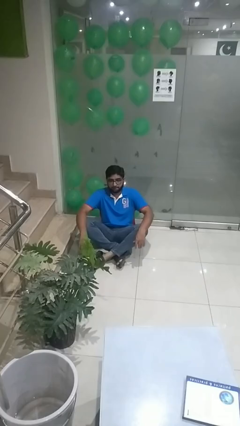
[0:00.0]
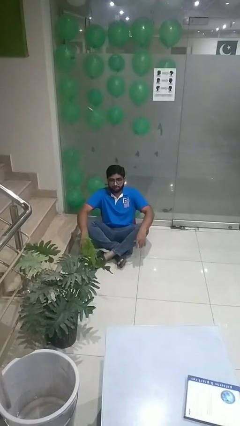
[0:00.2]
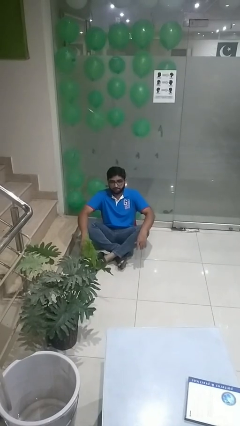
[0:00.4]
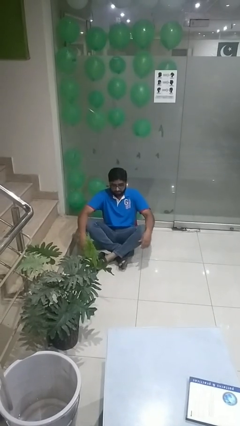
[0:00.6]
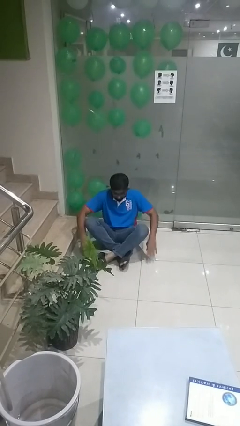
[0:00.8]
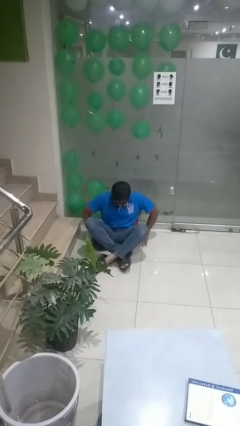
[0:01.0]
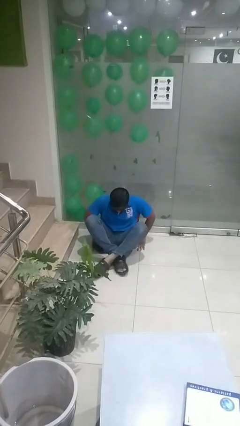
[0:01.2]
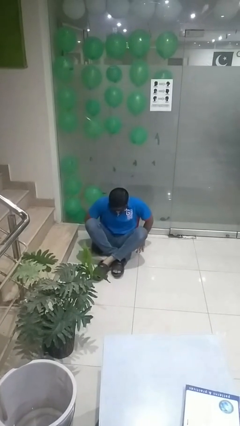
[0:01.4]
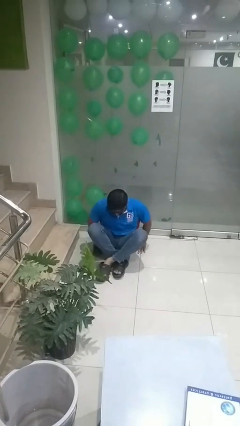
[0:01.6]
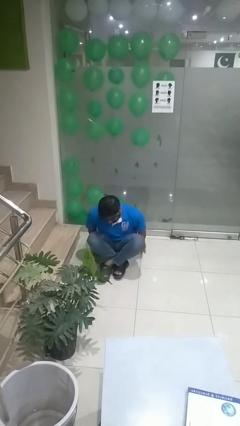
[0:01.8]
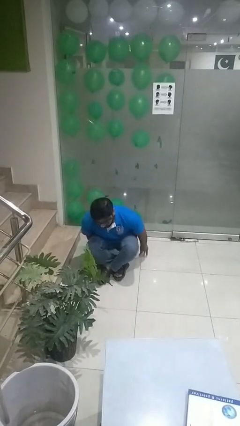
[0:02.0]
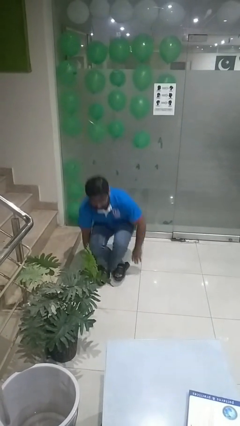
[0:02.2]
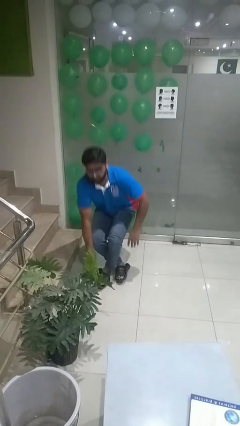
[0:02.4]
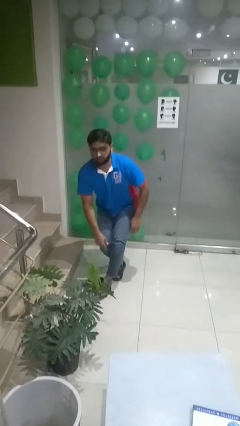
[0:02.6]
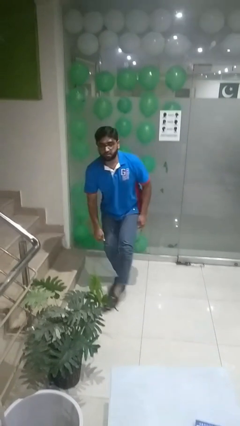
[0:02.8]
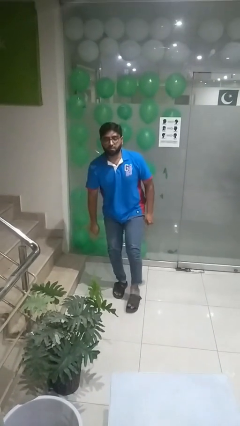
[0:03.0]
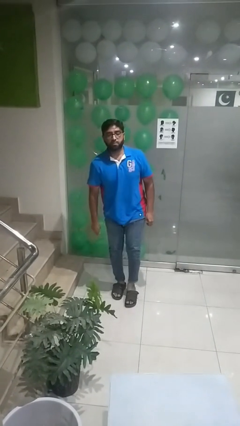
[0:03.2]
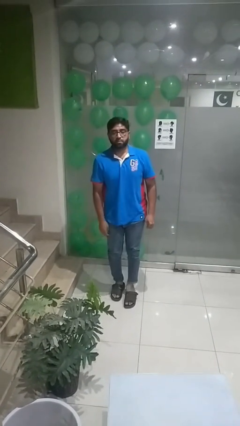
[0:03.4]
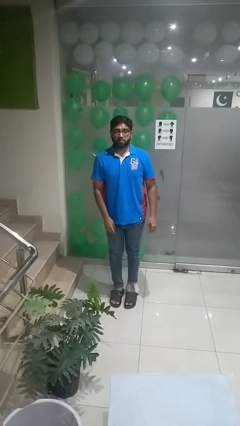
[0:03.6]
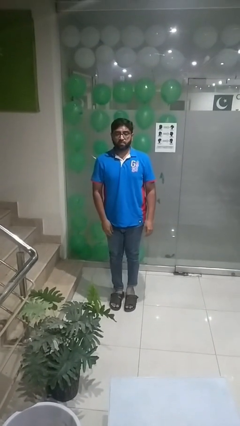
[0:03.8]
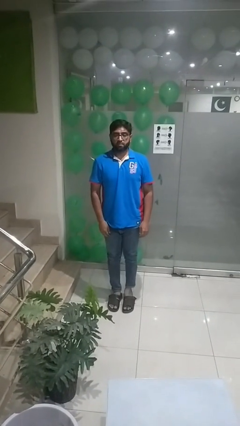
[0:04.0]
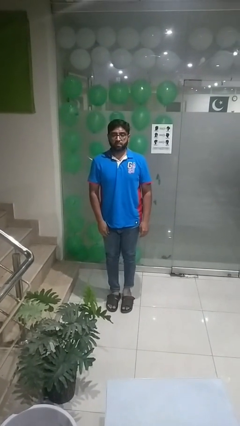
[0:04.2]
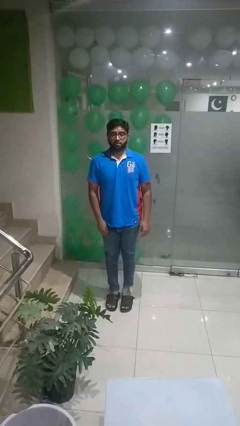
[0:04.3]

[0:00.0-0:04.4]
person stands up from floor

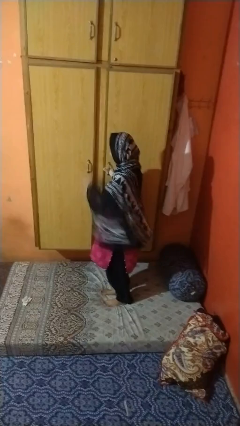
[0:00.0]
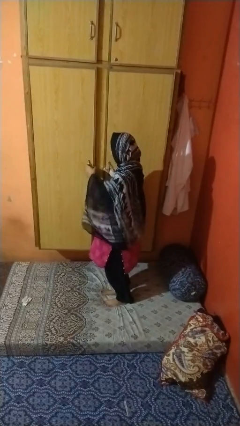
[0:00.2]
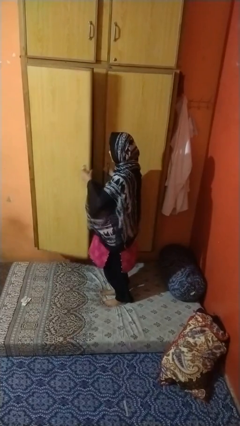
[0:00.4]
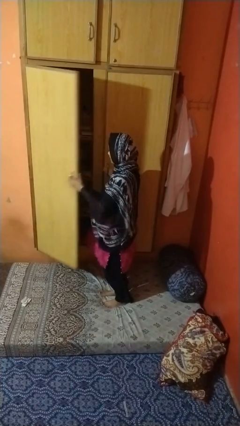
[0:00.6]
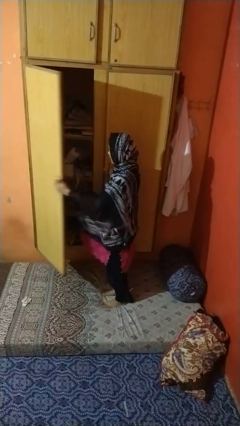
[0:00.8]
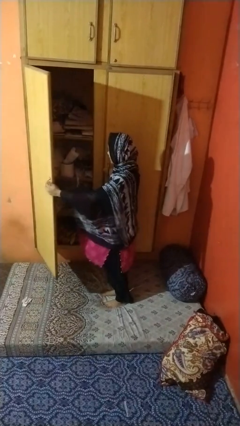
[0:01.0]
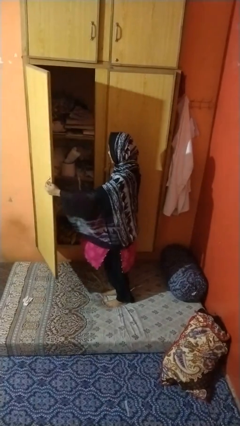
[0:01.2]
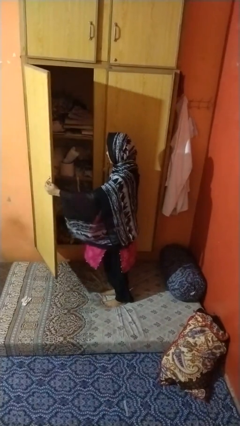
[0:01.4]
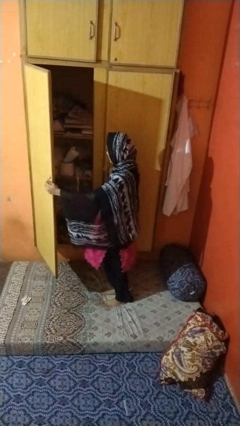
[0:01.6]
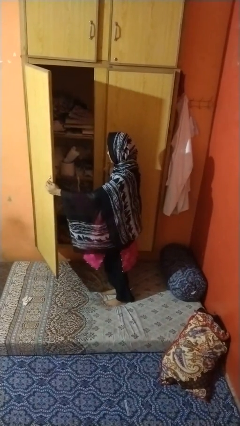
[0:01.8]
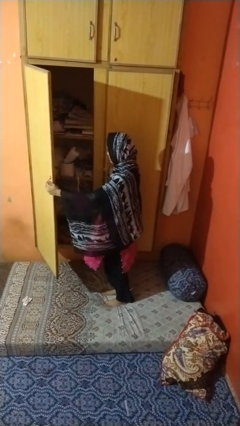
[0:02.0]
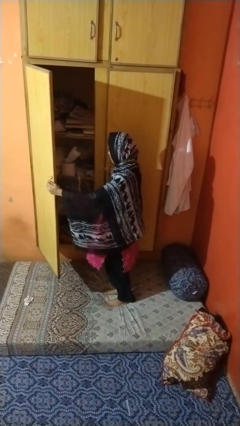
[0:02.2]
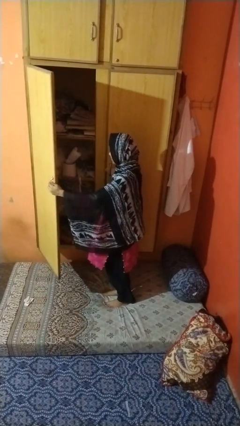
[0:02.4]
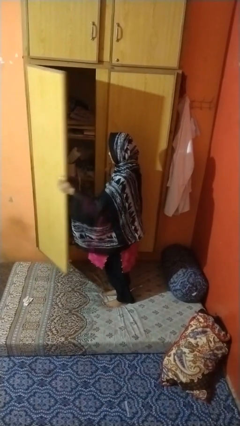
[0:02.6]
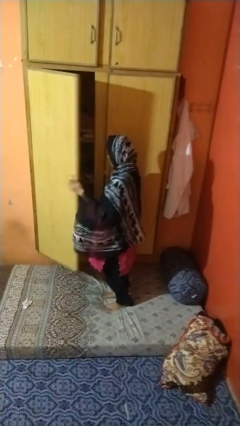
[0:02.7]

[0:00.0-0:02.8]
person opens closet door

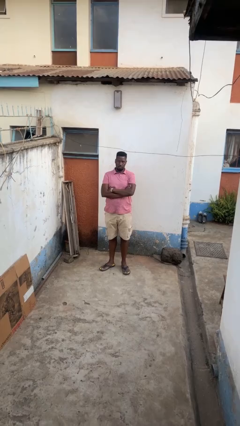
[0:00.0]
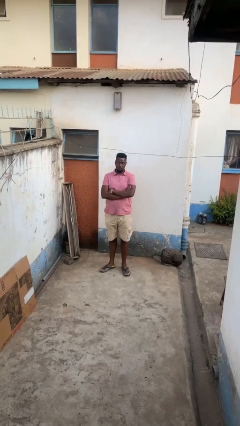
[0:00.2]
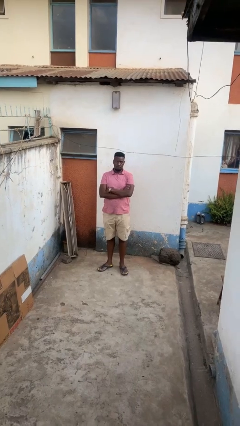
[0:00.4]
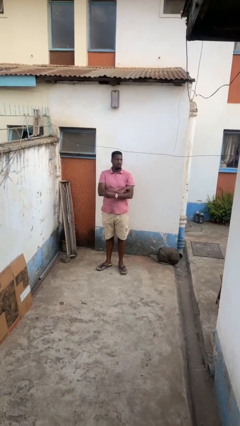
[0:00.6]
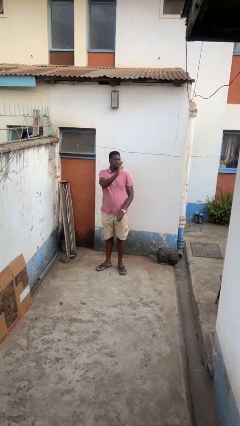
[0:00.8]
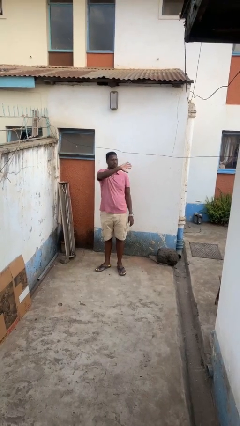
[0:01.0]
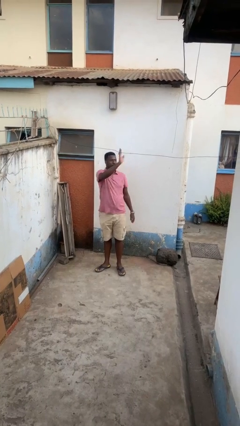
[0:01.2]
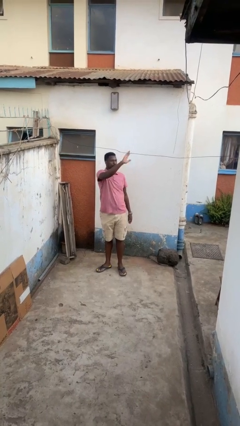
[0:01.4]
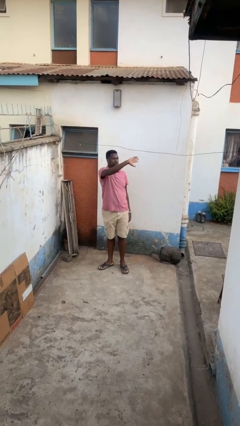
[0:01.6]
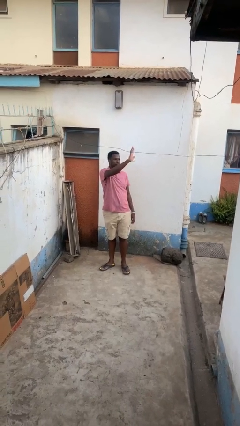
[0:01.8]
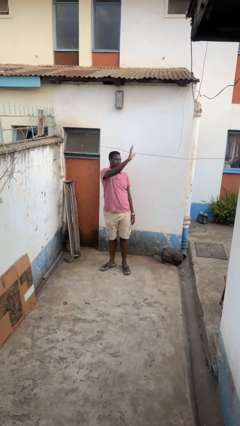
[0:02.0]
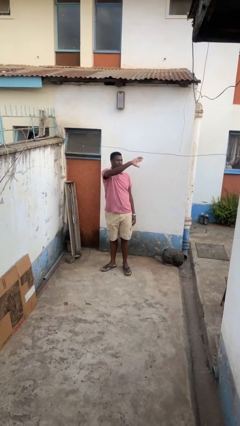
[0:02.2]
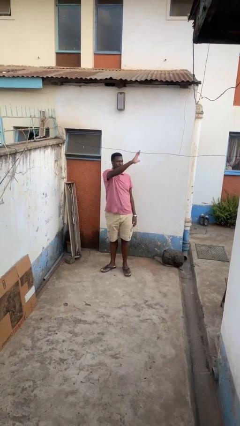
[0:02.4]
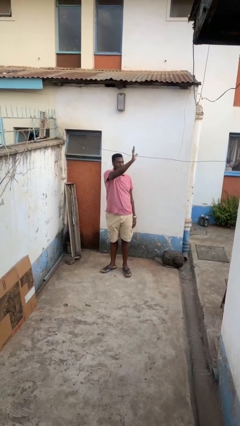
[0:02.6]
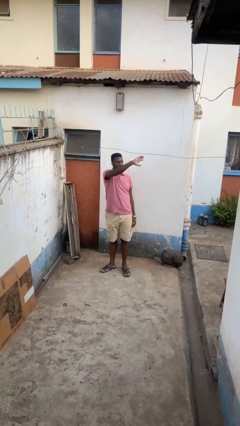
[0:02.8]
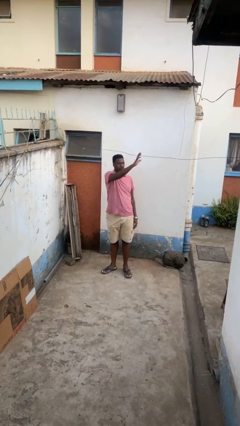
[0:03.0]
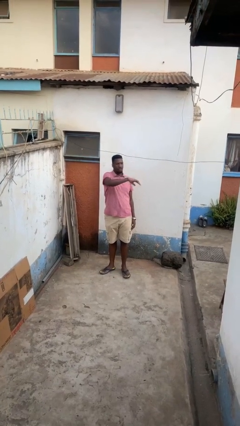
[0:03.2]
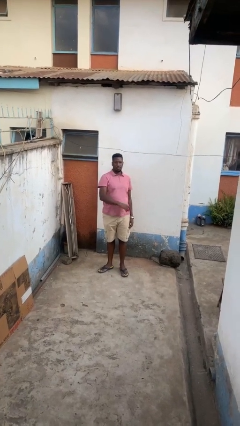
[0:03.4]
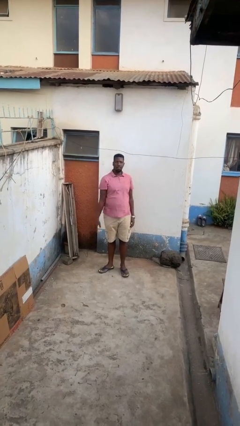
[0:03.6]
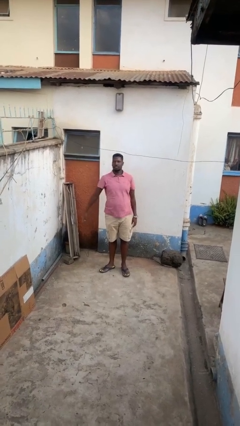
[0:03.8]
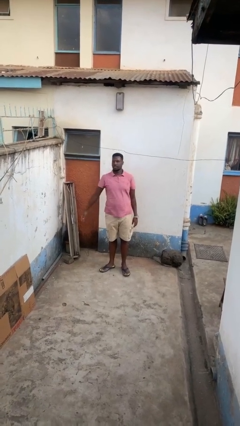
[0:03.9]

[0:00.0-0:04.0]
person waves at person

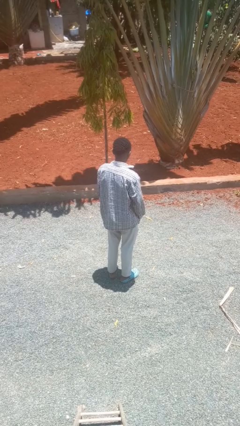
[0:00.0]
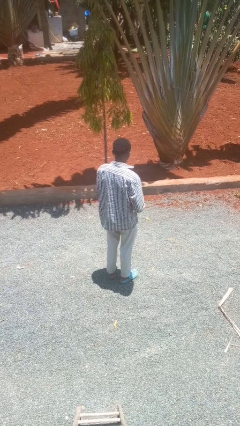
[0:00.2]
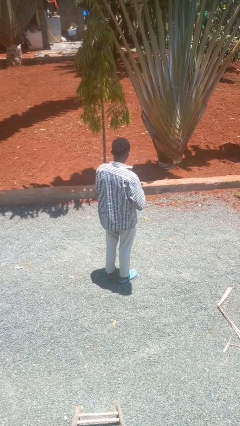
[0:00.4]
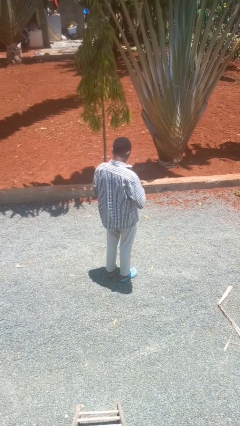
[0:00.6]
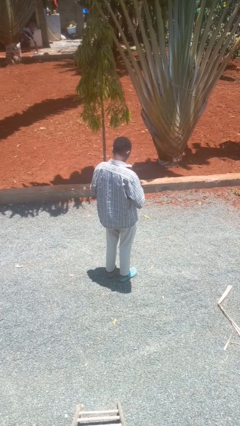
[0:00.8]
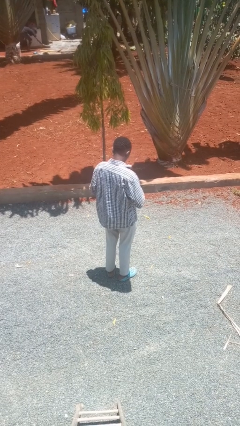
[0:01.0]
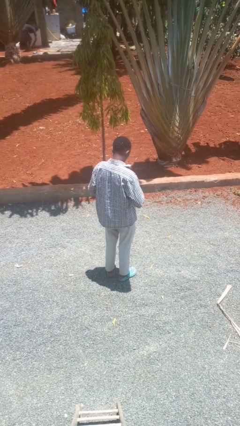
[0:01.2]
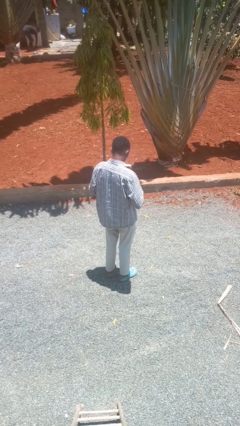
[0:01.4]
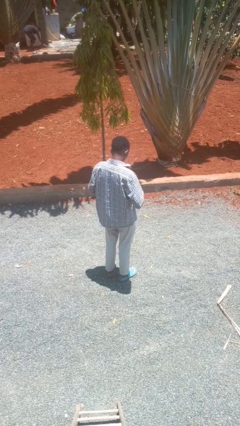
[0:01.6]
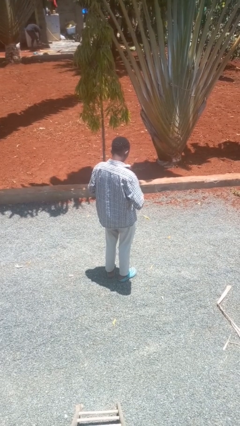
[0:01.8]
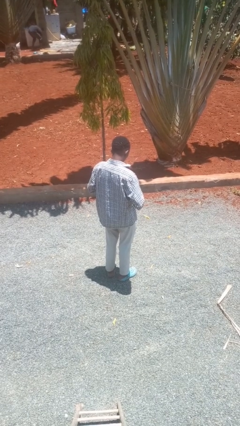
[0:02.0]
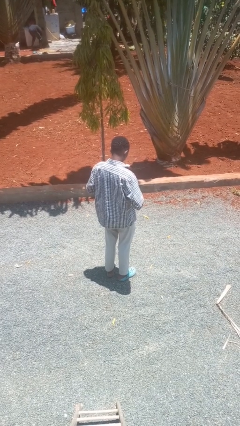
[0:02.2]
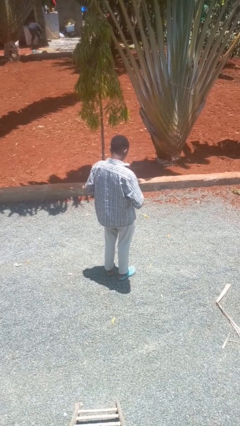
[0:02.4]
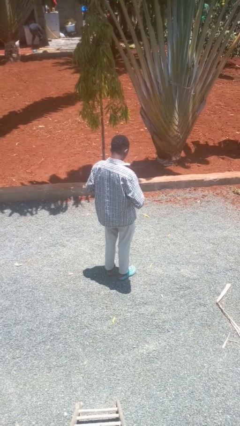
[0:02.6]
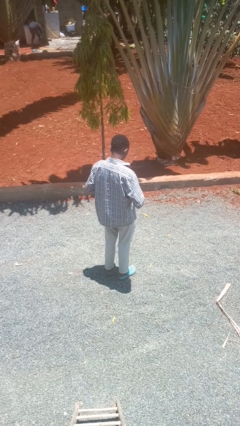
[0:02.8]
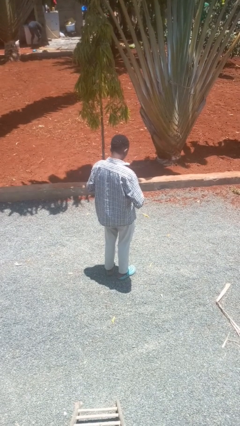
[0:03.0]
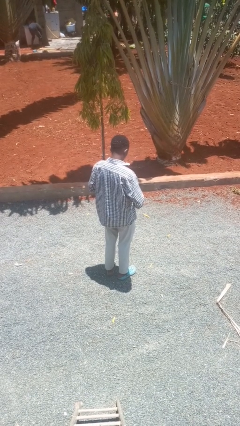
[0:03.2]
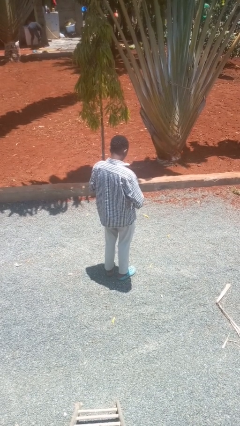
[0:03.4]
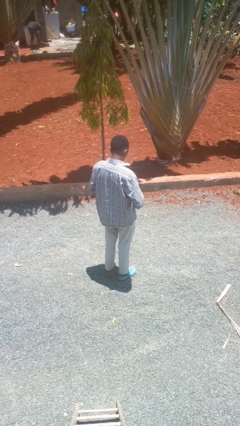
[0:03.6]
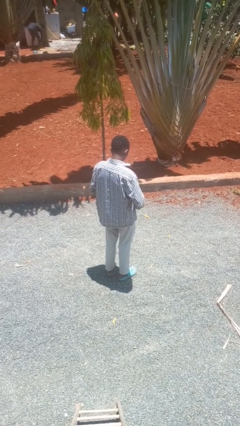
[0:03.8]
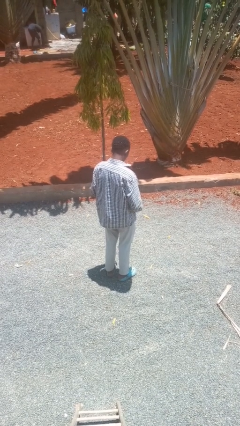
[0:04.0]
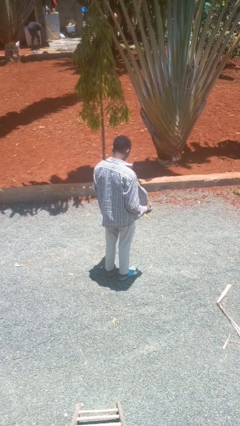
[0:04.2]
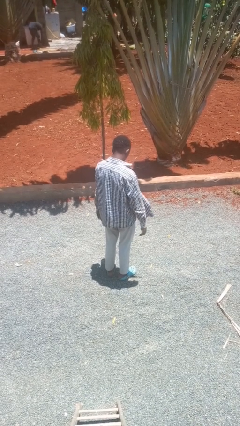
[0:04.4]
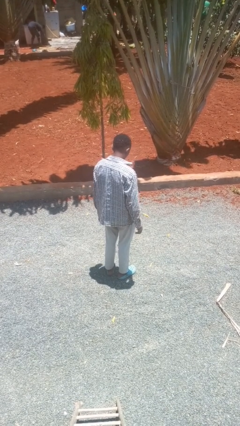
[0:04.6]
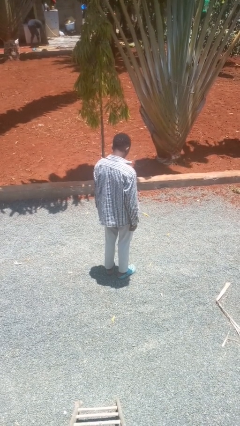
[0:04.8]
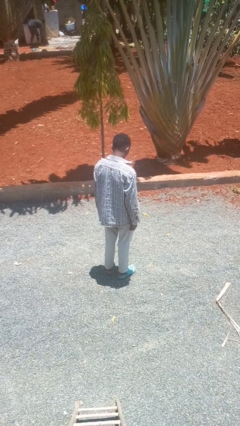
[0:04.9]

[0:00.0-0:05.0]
person unbuttons shirt

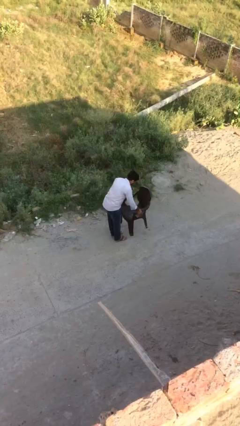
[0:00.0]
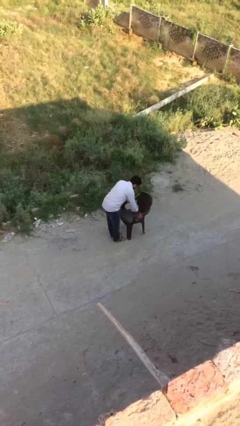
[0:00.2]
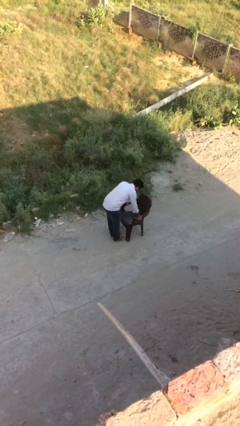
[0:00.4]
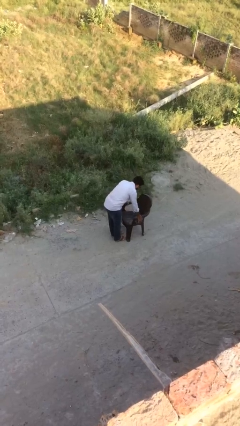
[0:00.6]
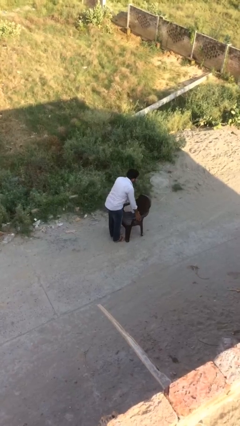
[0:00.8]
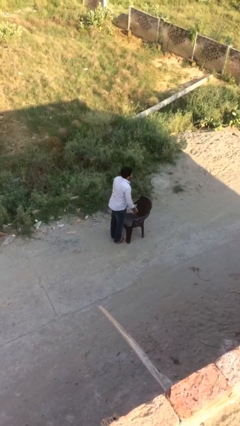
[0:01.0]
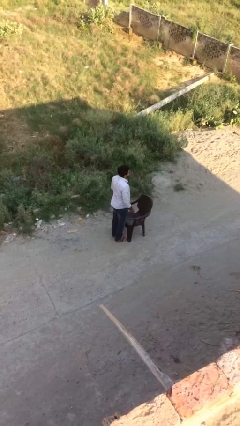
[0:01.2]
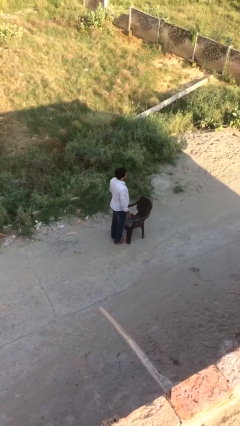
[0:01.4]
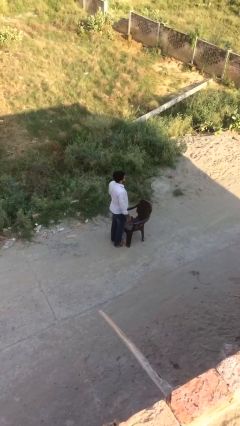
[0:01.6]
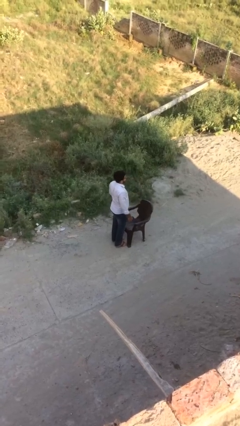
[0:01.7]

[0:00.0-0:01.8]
person puts down object on floor
